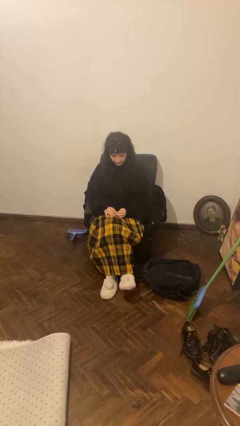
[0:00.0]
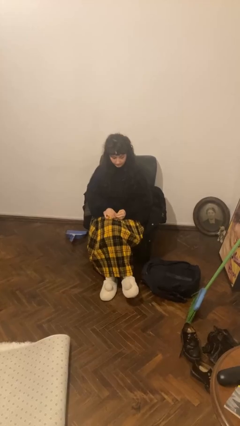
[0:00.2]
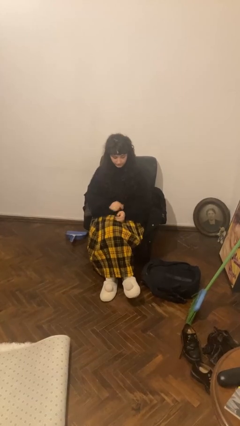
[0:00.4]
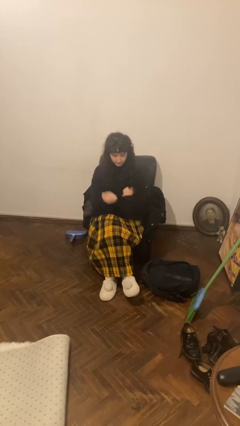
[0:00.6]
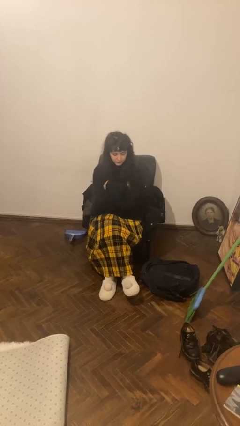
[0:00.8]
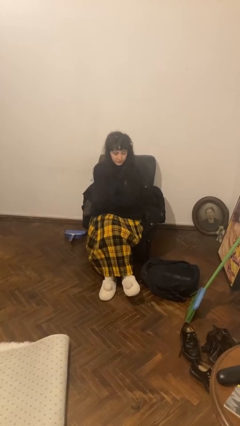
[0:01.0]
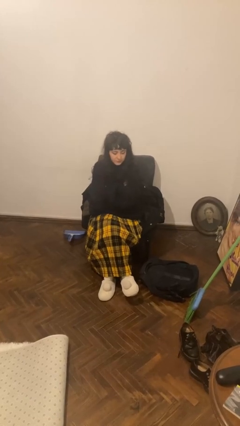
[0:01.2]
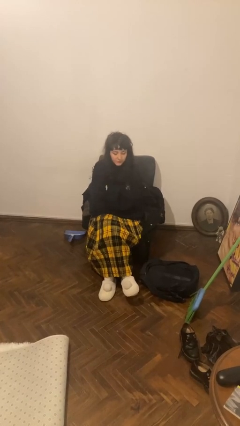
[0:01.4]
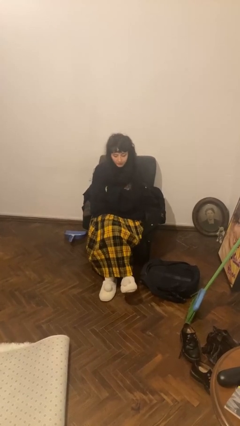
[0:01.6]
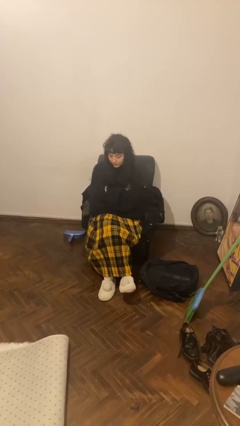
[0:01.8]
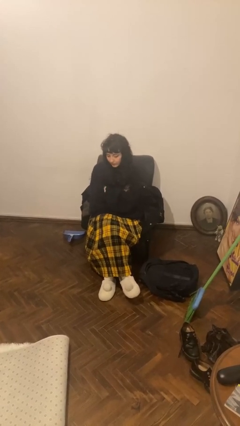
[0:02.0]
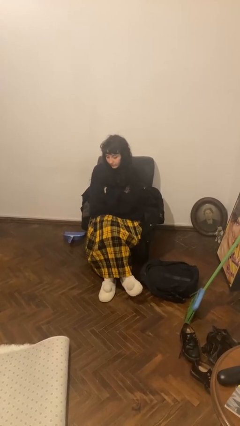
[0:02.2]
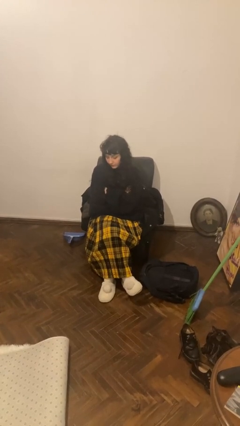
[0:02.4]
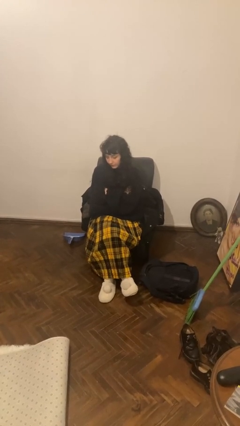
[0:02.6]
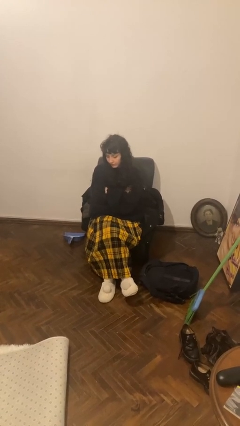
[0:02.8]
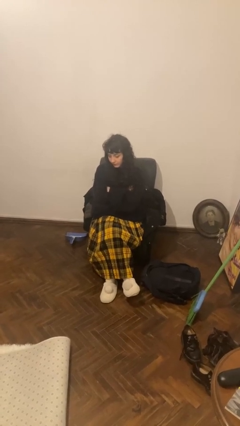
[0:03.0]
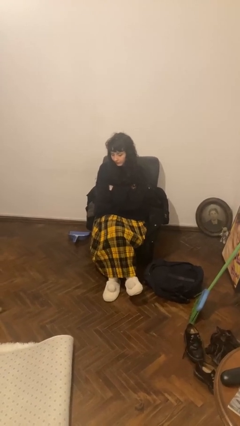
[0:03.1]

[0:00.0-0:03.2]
person crosses arms

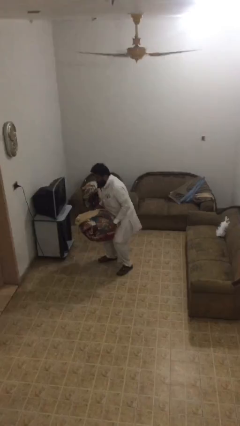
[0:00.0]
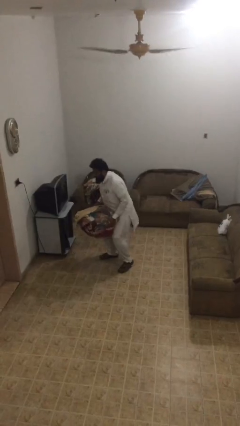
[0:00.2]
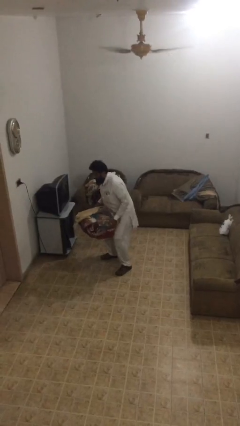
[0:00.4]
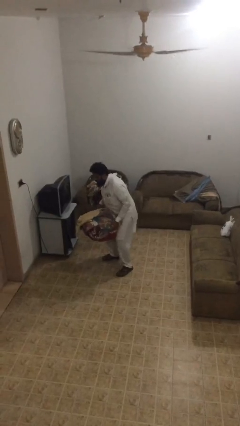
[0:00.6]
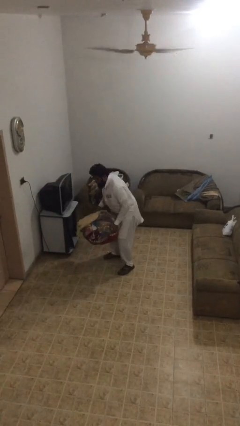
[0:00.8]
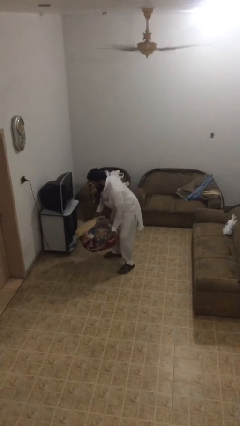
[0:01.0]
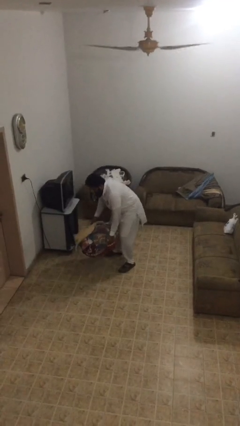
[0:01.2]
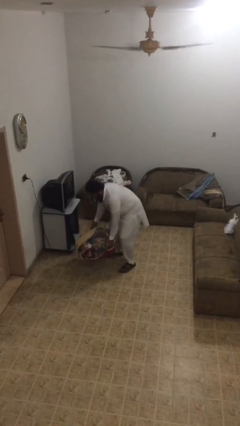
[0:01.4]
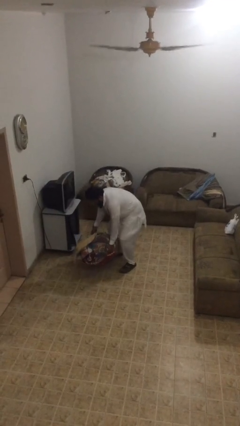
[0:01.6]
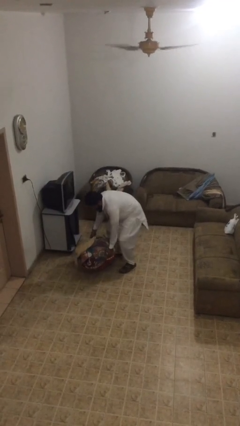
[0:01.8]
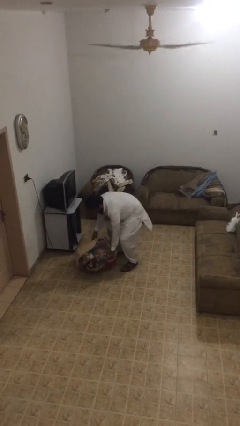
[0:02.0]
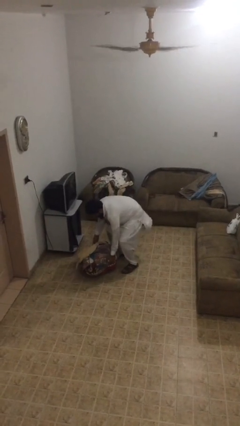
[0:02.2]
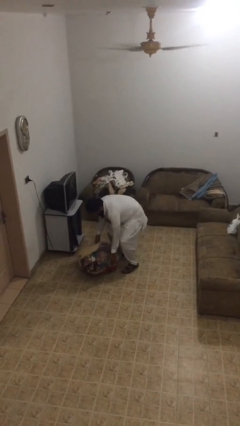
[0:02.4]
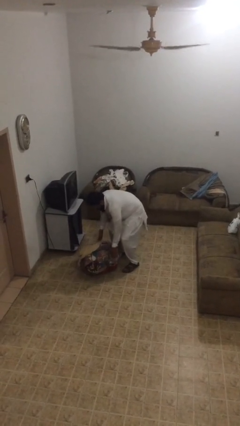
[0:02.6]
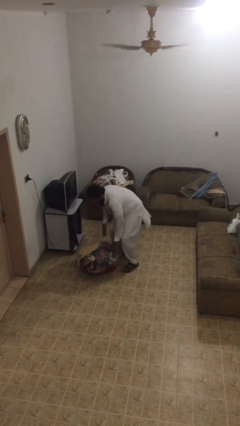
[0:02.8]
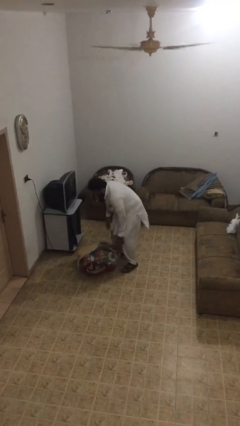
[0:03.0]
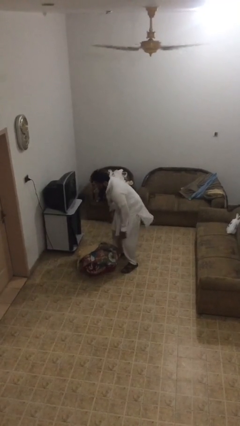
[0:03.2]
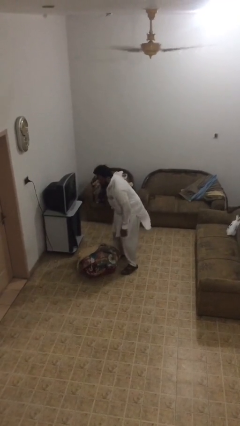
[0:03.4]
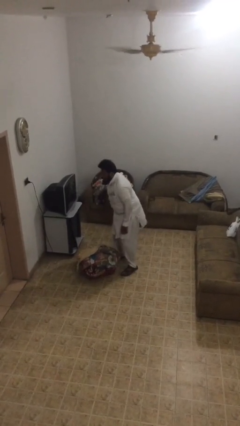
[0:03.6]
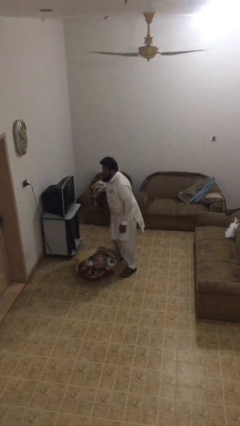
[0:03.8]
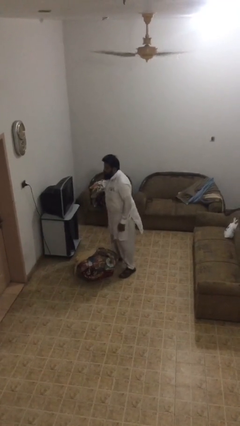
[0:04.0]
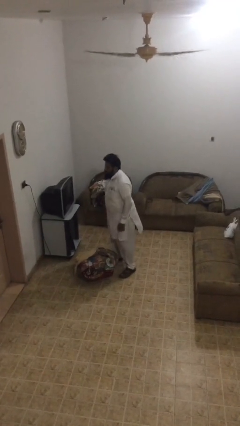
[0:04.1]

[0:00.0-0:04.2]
person puts down object on floor

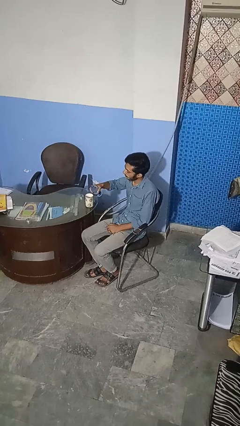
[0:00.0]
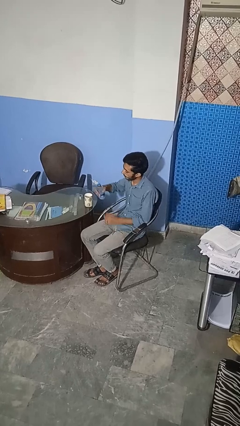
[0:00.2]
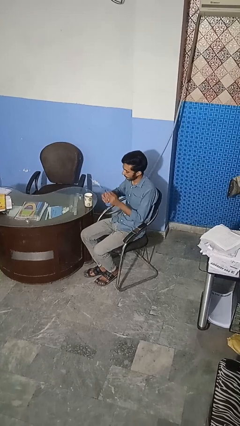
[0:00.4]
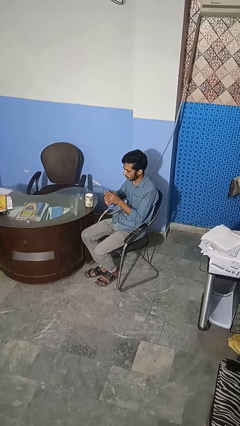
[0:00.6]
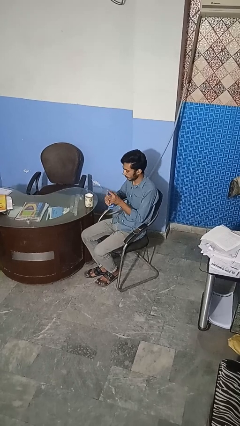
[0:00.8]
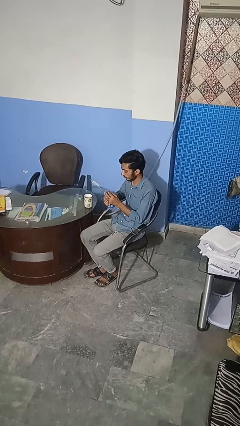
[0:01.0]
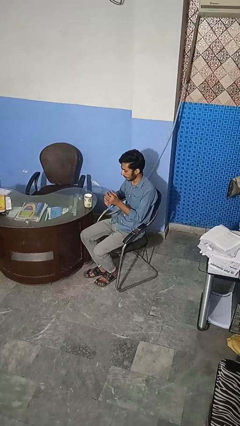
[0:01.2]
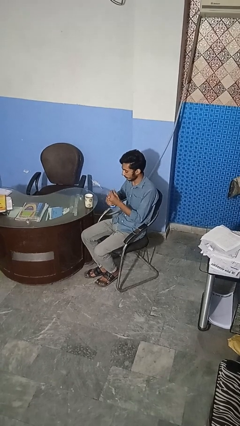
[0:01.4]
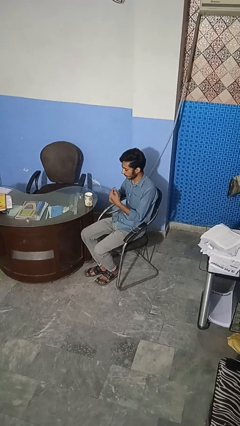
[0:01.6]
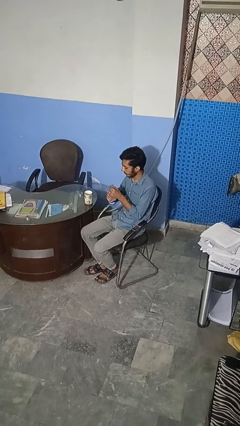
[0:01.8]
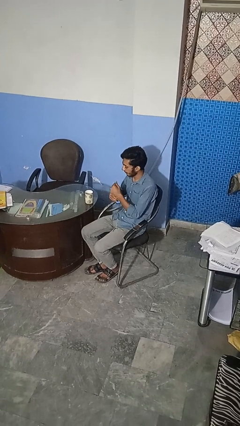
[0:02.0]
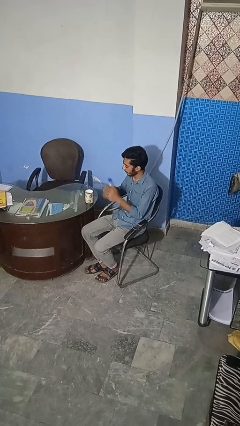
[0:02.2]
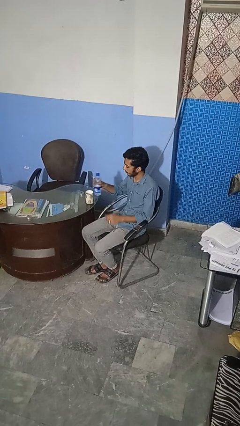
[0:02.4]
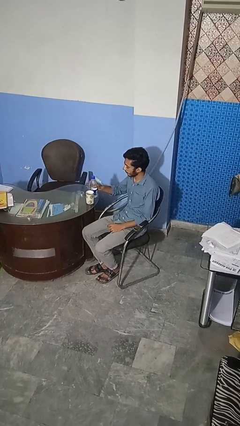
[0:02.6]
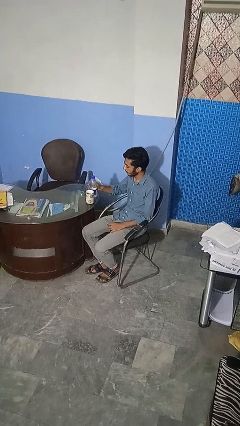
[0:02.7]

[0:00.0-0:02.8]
person screws lid to bottle

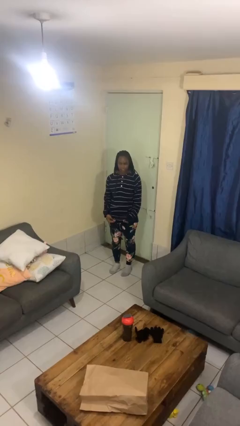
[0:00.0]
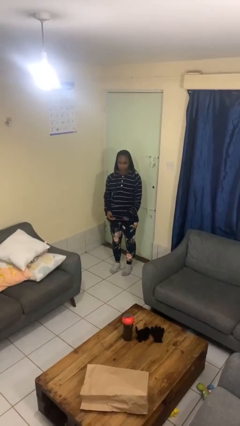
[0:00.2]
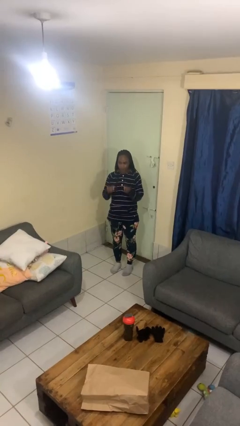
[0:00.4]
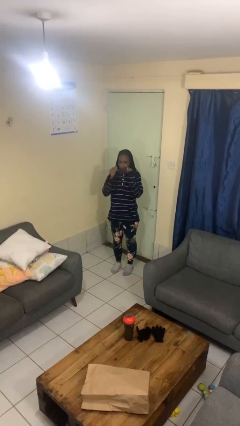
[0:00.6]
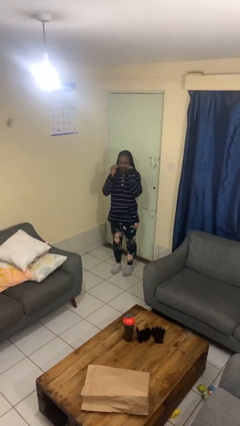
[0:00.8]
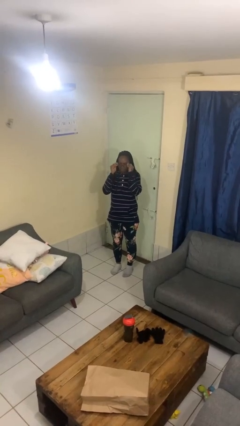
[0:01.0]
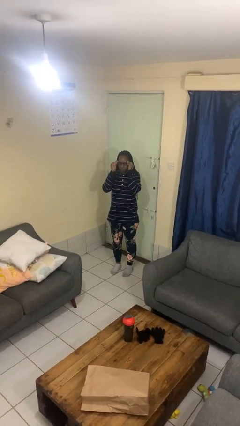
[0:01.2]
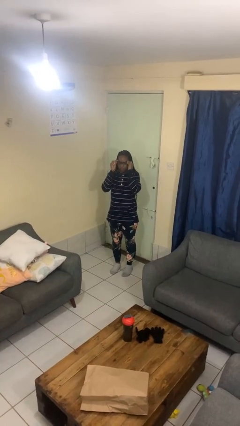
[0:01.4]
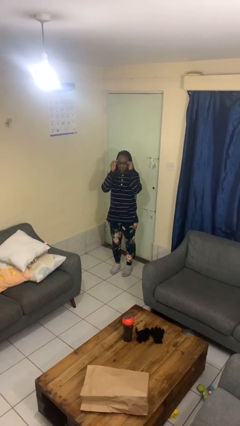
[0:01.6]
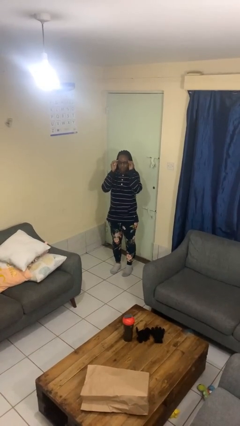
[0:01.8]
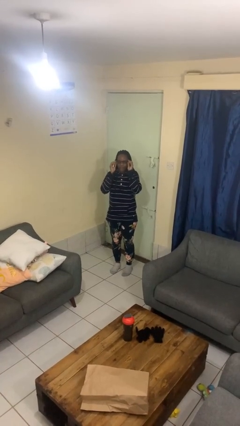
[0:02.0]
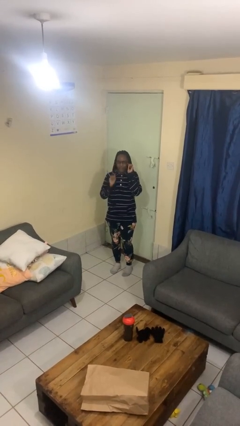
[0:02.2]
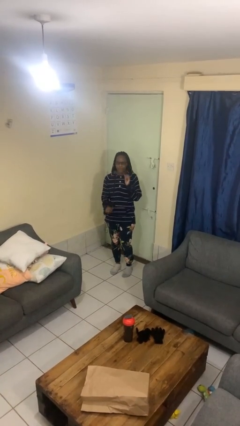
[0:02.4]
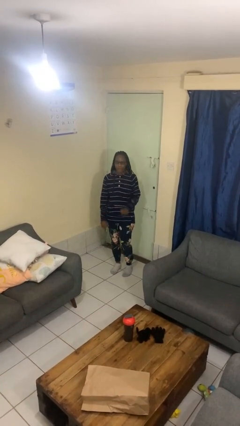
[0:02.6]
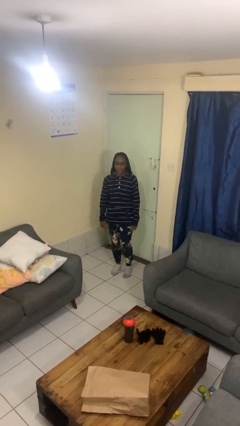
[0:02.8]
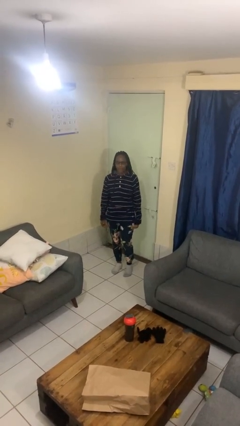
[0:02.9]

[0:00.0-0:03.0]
person puts on glasses

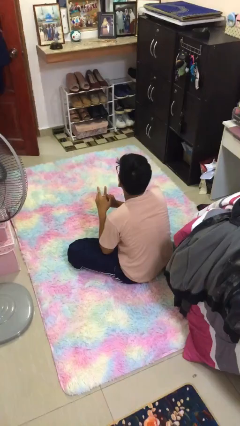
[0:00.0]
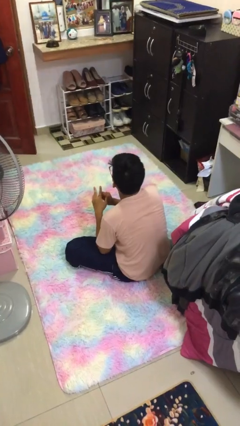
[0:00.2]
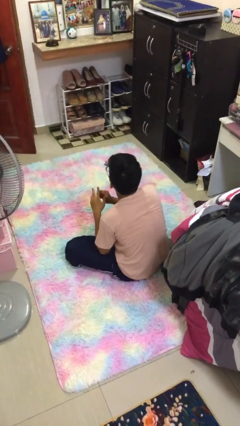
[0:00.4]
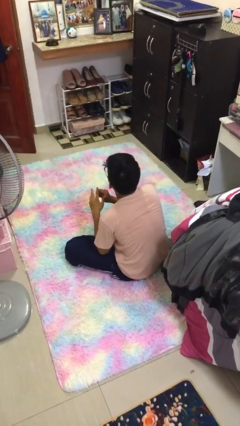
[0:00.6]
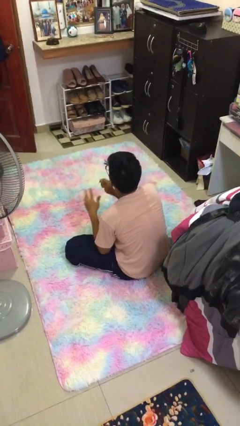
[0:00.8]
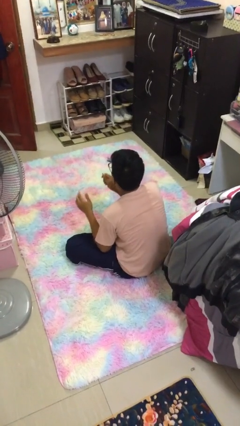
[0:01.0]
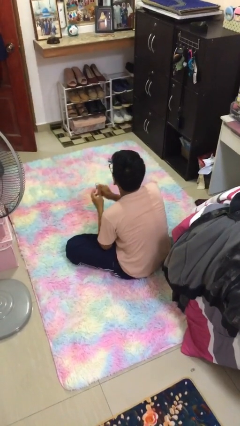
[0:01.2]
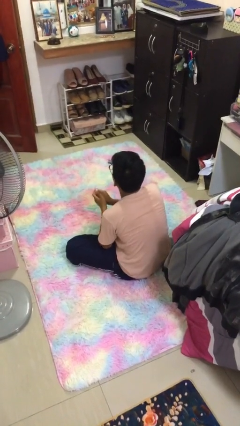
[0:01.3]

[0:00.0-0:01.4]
person takes off ring

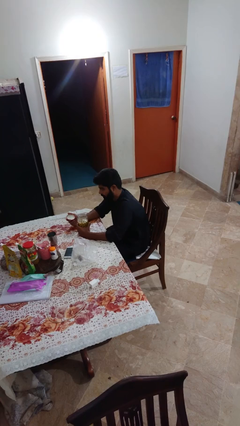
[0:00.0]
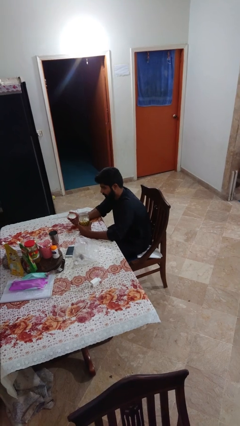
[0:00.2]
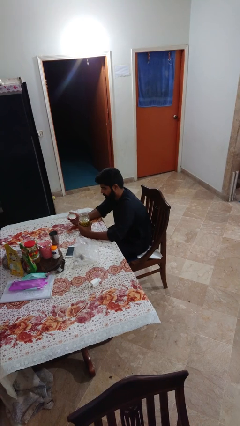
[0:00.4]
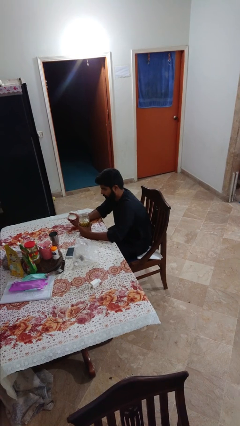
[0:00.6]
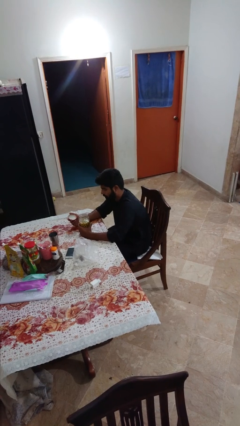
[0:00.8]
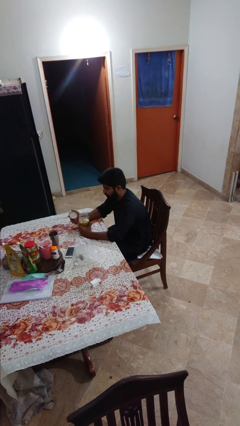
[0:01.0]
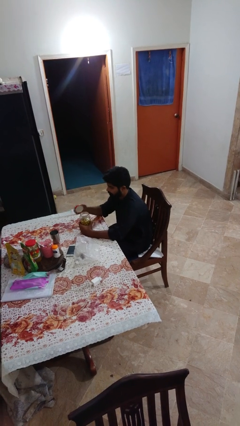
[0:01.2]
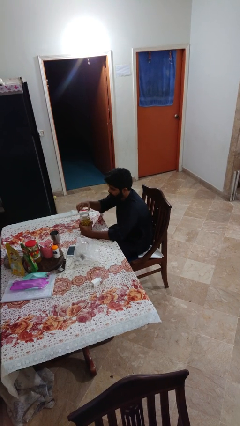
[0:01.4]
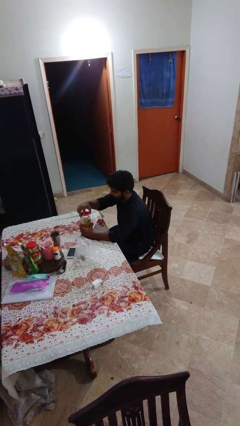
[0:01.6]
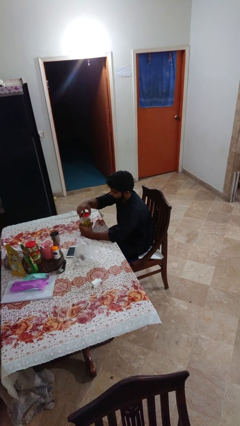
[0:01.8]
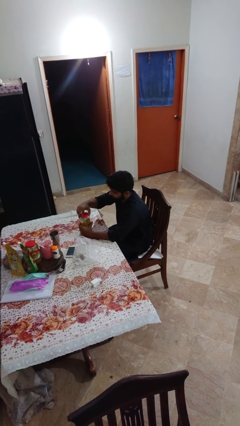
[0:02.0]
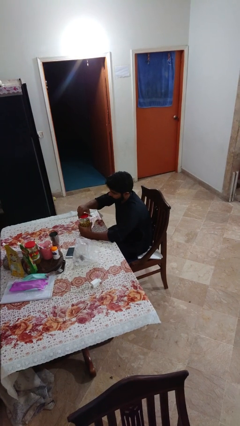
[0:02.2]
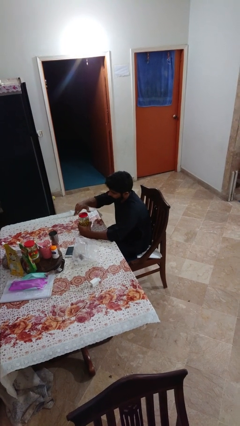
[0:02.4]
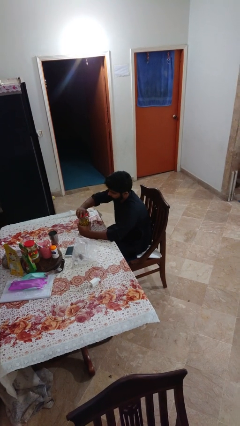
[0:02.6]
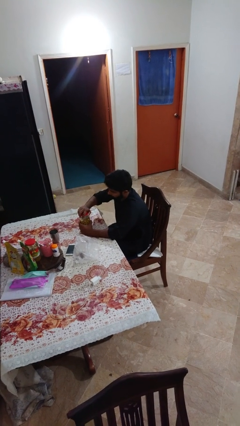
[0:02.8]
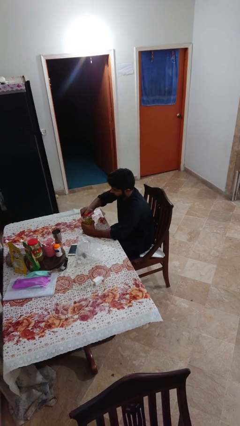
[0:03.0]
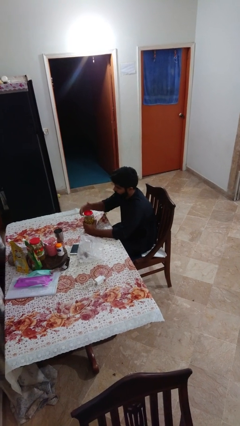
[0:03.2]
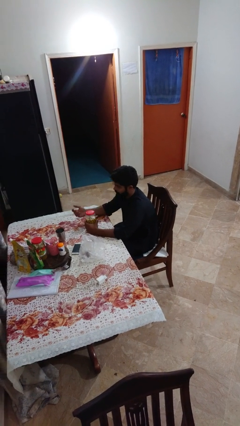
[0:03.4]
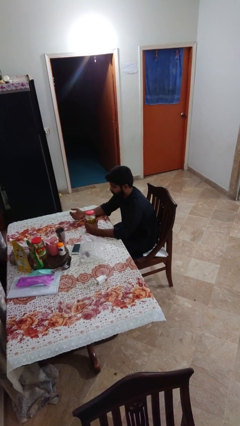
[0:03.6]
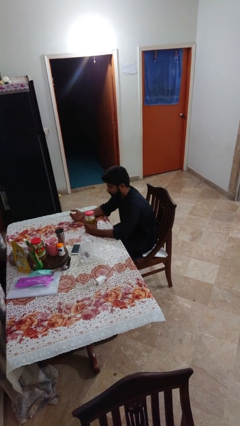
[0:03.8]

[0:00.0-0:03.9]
person closes jar
